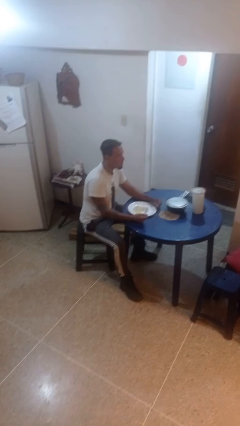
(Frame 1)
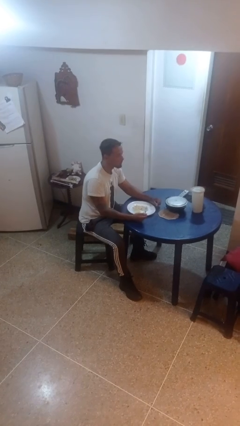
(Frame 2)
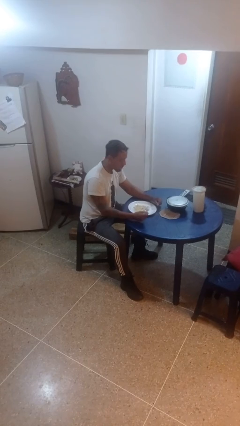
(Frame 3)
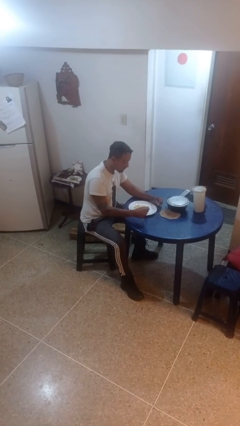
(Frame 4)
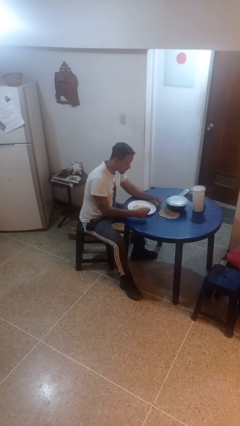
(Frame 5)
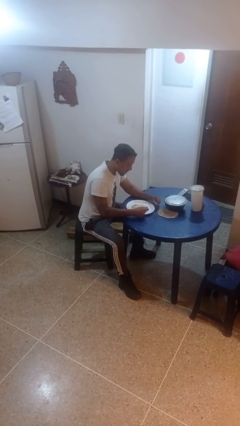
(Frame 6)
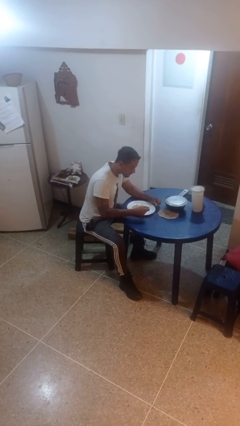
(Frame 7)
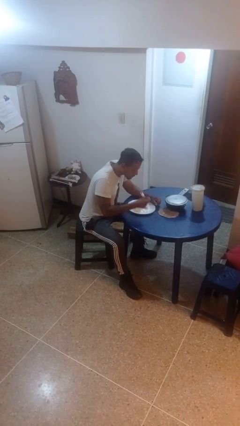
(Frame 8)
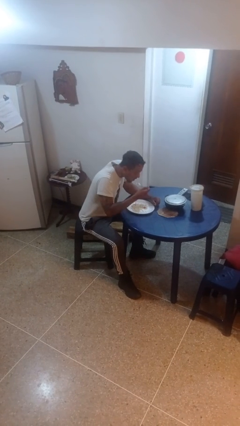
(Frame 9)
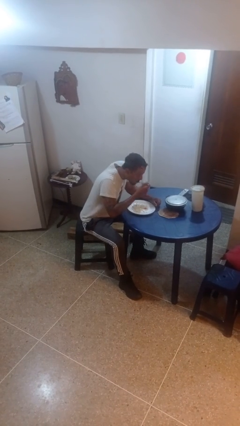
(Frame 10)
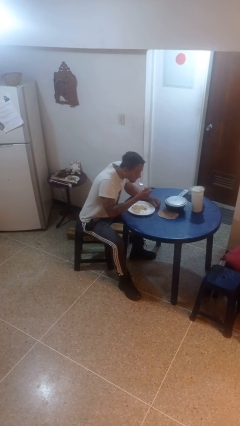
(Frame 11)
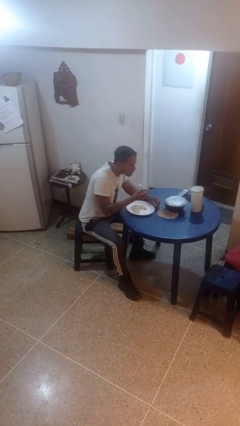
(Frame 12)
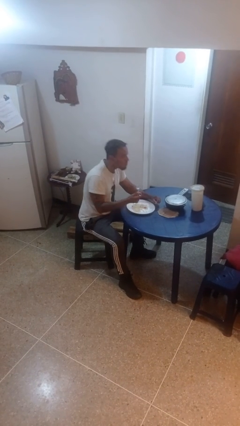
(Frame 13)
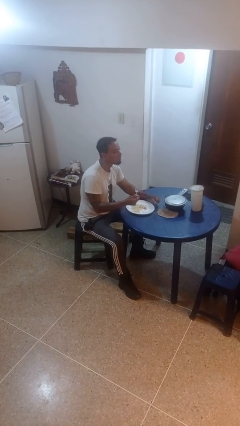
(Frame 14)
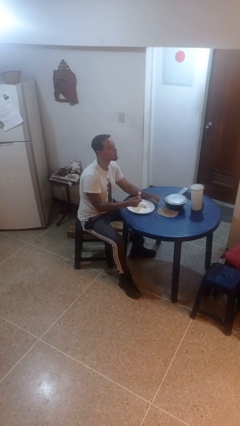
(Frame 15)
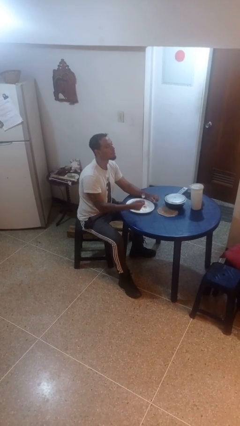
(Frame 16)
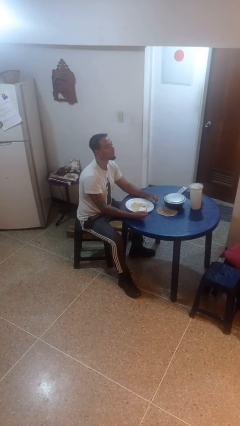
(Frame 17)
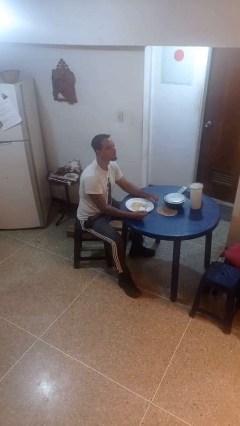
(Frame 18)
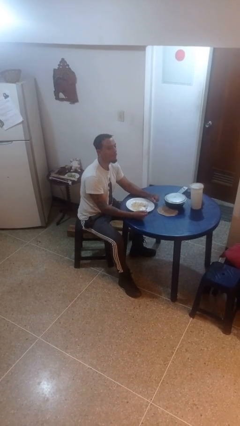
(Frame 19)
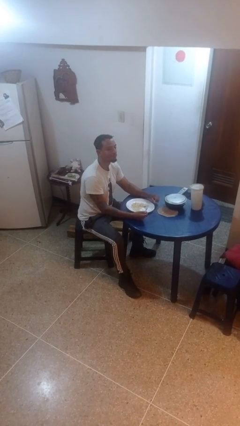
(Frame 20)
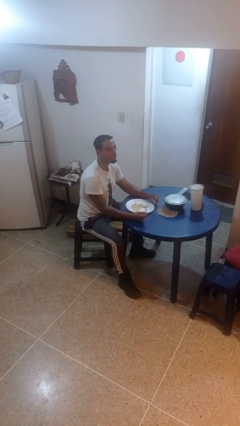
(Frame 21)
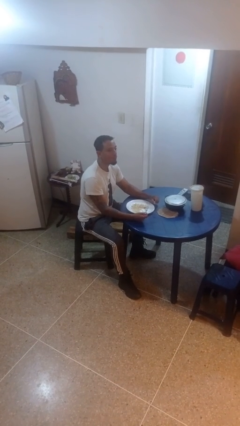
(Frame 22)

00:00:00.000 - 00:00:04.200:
person eats with utensil

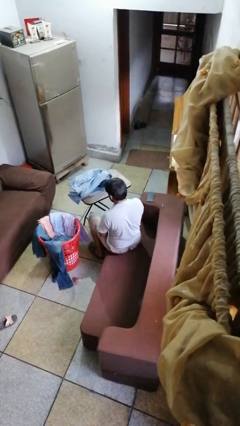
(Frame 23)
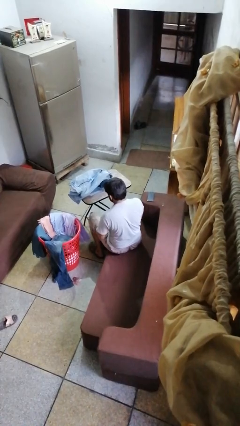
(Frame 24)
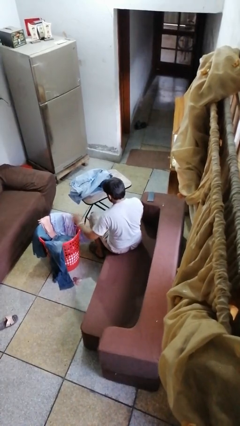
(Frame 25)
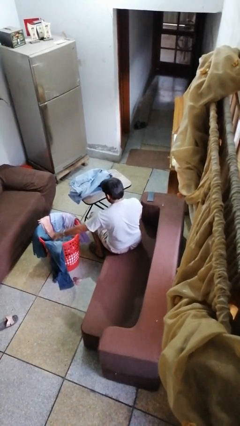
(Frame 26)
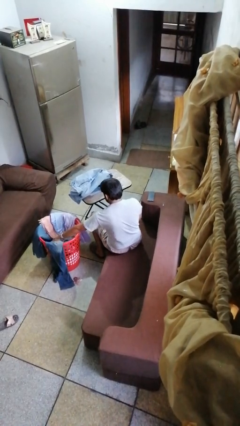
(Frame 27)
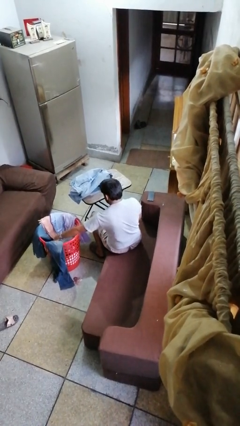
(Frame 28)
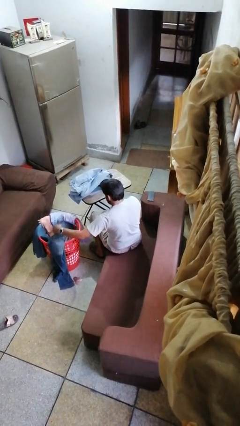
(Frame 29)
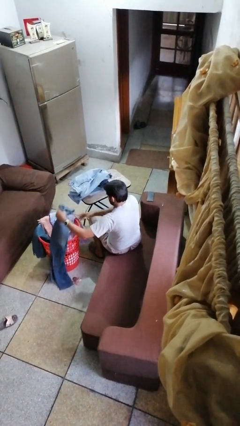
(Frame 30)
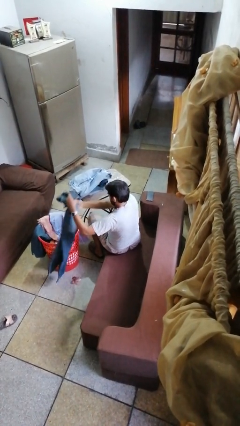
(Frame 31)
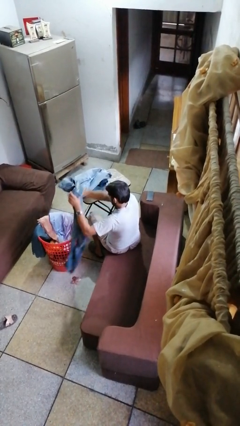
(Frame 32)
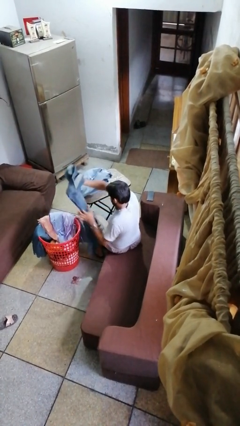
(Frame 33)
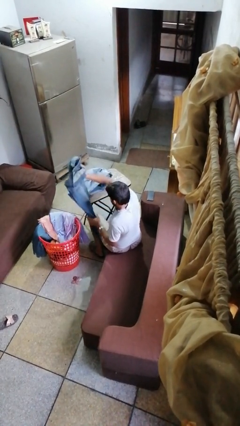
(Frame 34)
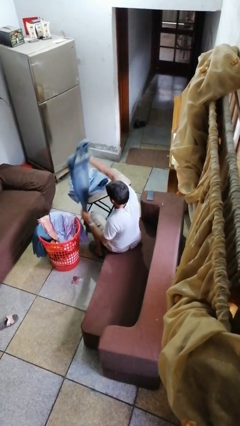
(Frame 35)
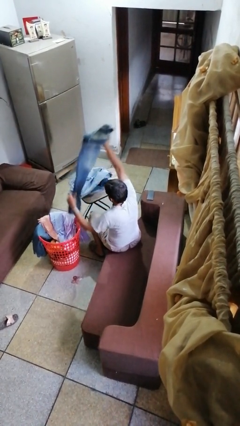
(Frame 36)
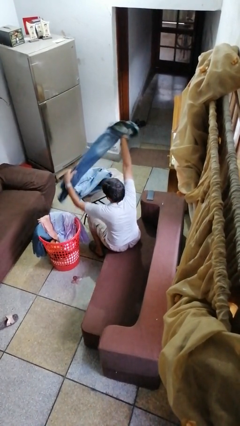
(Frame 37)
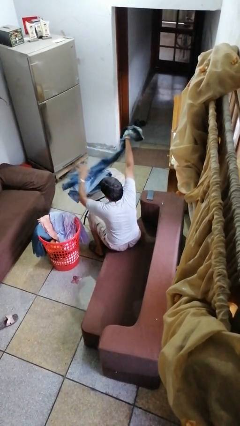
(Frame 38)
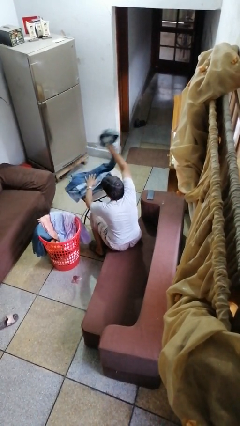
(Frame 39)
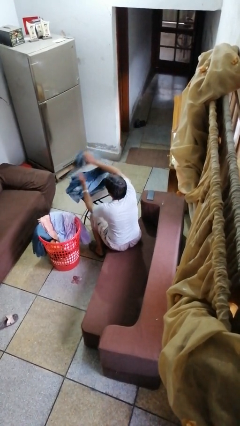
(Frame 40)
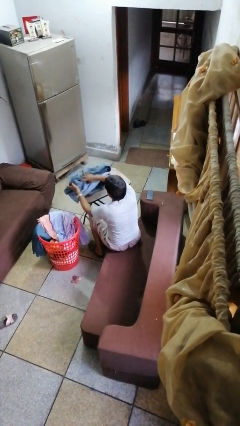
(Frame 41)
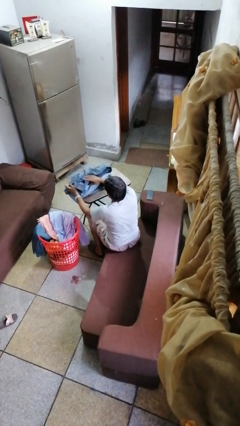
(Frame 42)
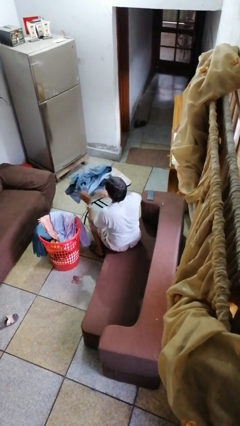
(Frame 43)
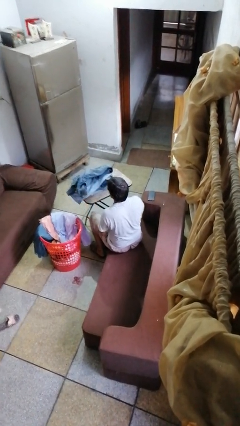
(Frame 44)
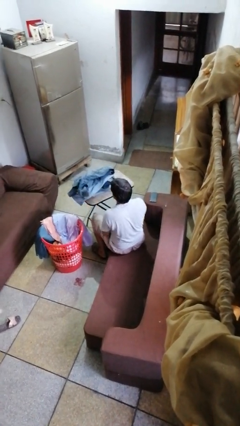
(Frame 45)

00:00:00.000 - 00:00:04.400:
person folds pants

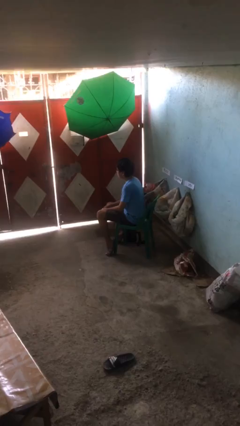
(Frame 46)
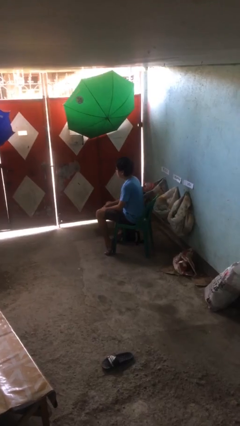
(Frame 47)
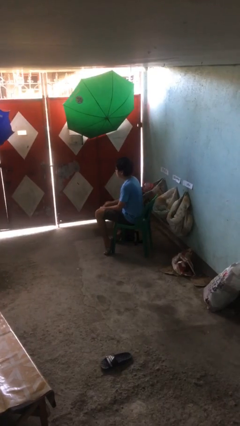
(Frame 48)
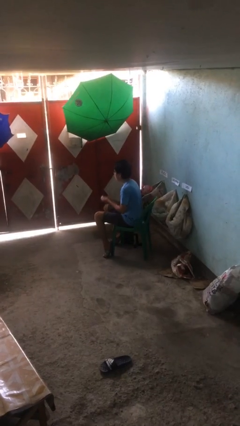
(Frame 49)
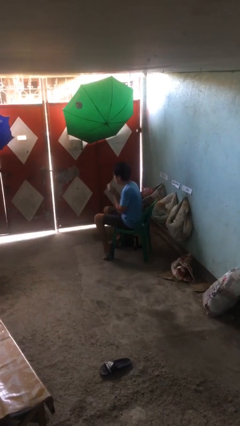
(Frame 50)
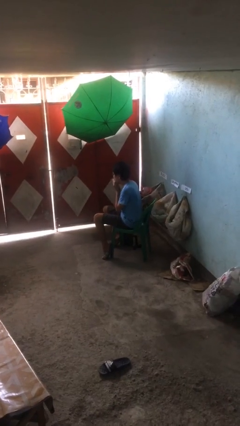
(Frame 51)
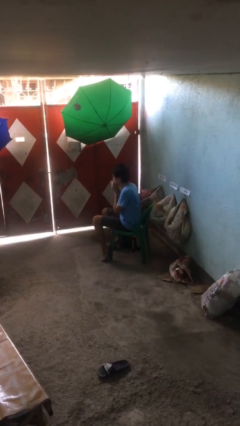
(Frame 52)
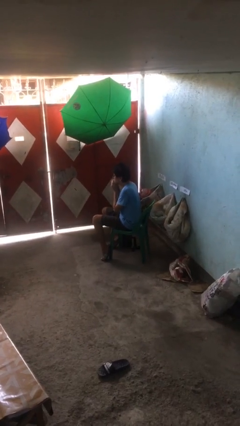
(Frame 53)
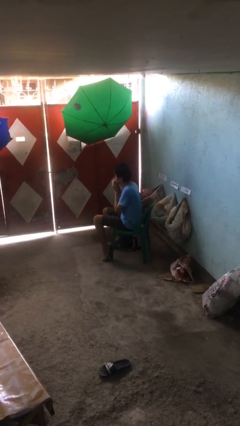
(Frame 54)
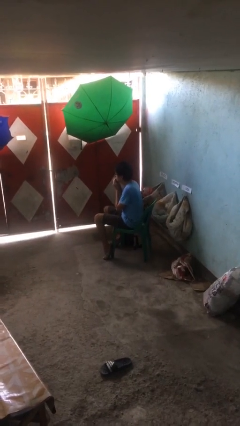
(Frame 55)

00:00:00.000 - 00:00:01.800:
person wipes mouth with napkin

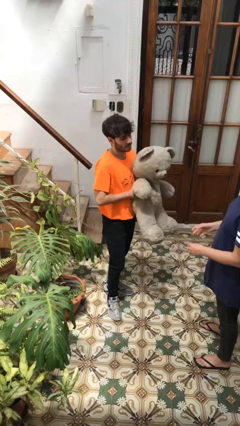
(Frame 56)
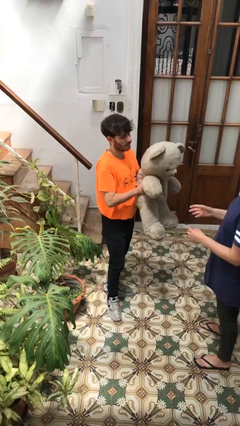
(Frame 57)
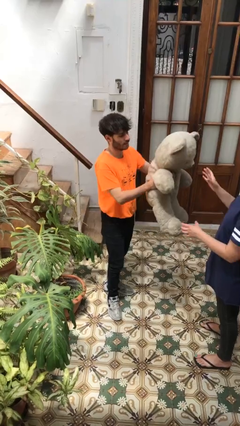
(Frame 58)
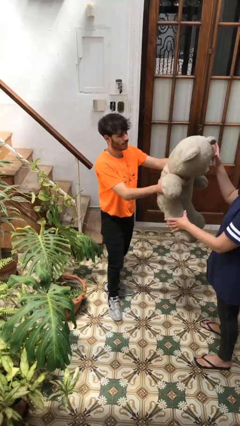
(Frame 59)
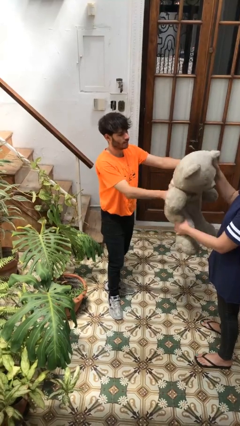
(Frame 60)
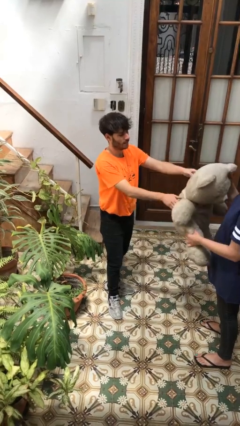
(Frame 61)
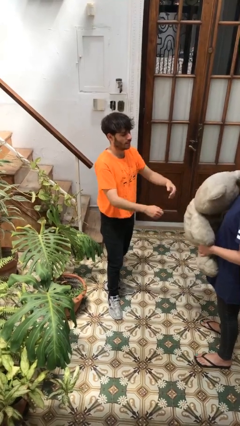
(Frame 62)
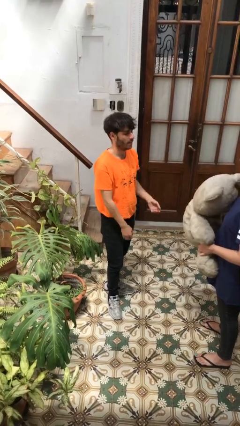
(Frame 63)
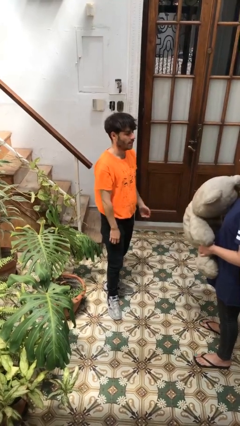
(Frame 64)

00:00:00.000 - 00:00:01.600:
person transfers object to person

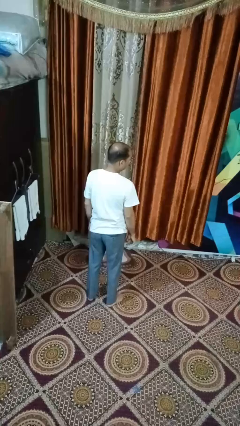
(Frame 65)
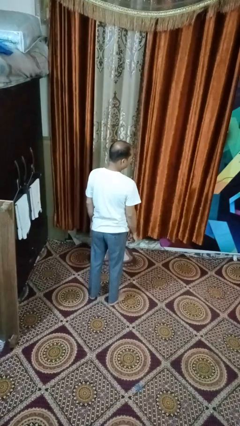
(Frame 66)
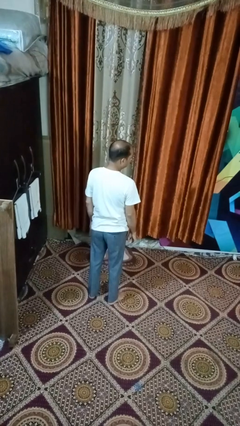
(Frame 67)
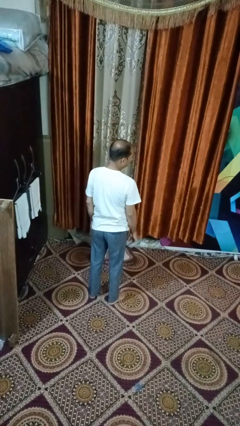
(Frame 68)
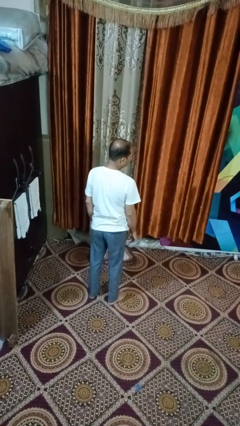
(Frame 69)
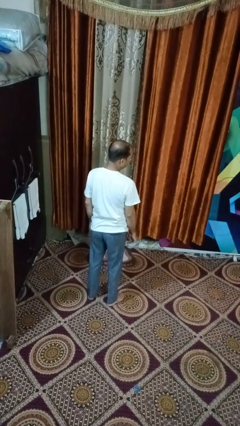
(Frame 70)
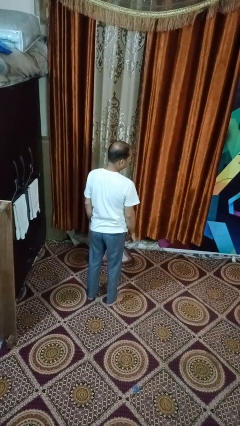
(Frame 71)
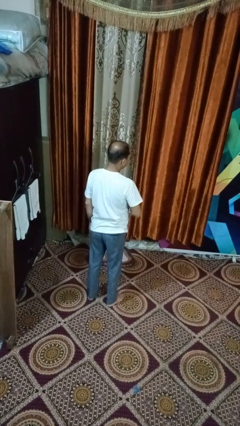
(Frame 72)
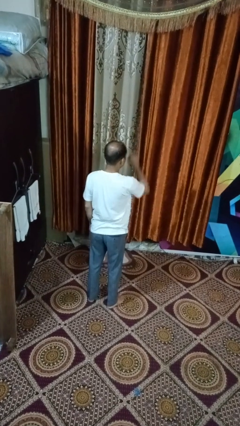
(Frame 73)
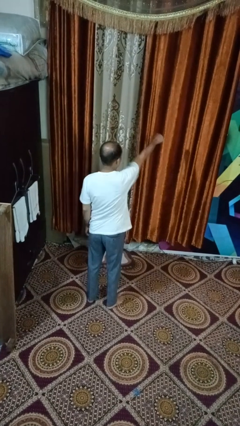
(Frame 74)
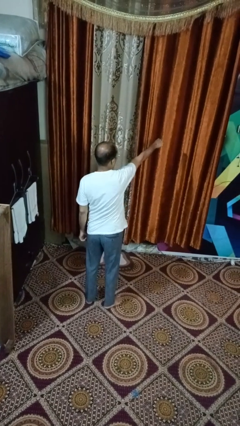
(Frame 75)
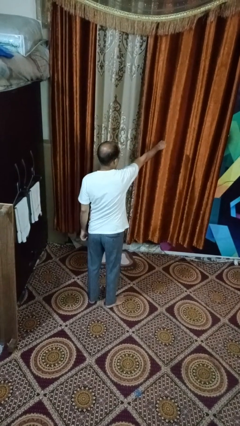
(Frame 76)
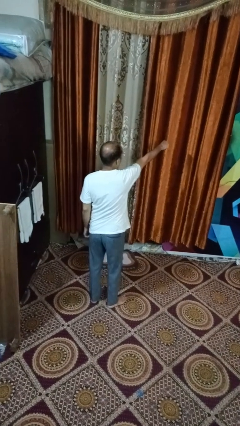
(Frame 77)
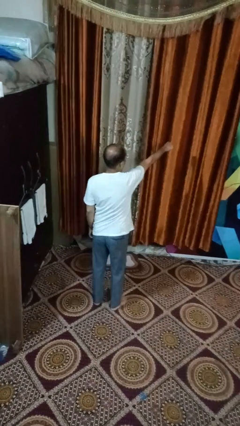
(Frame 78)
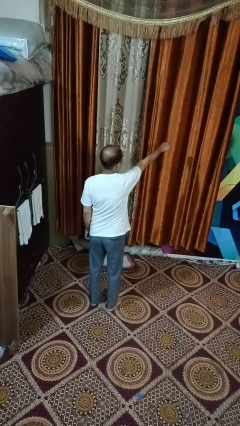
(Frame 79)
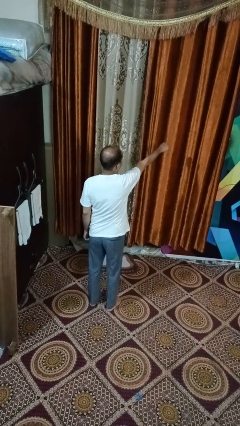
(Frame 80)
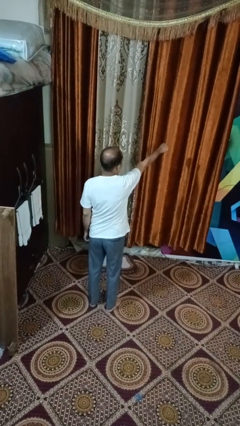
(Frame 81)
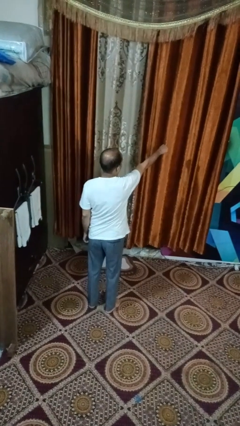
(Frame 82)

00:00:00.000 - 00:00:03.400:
person punches

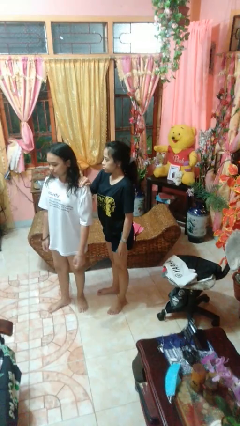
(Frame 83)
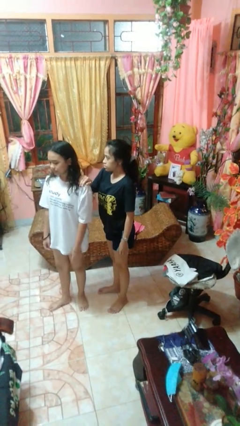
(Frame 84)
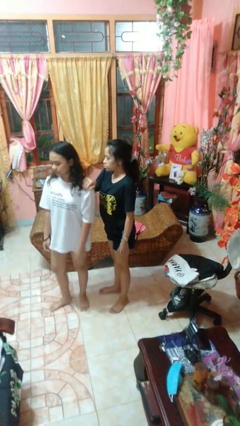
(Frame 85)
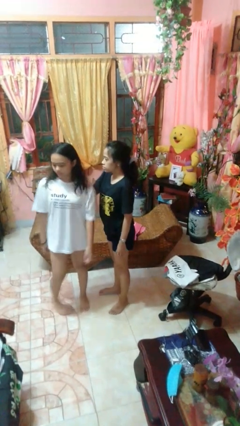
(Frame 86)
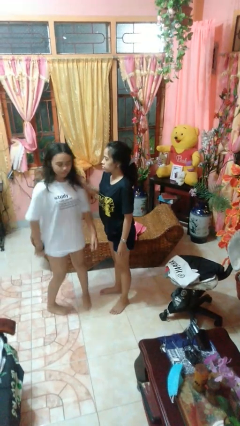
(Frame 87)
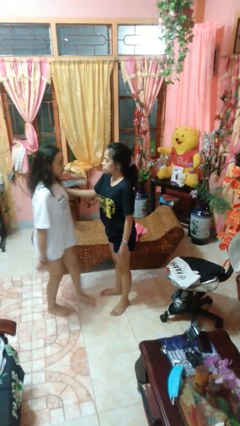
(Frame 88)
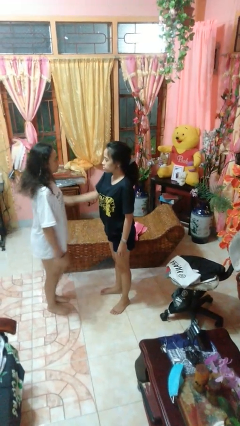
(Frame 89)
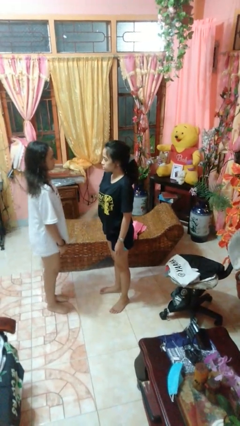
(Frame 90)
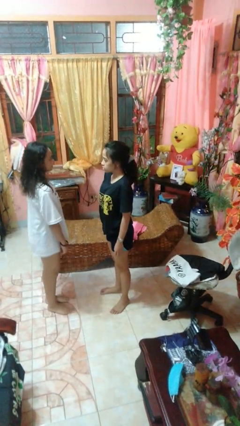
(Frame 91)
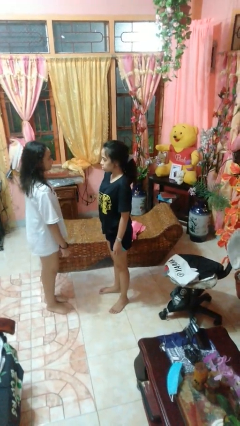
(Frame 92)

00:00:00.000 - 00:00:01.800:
person spins person around
